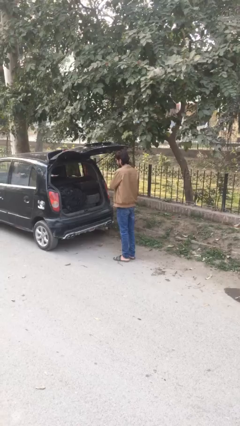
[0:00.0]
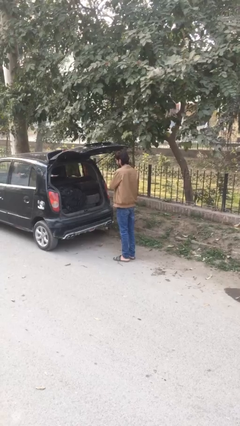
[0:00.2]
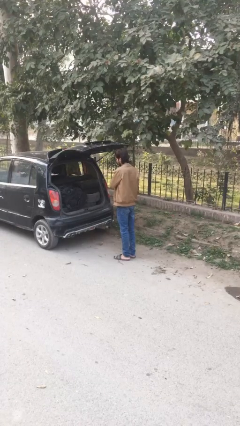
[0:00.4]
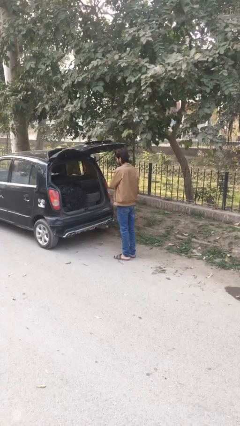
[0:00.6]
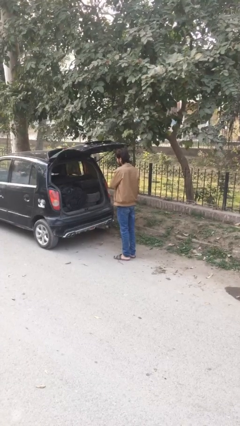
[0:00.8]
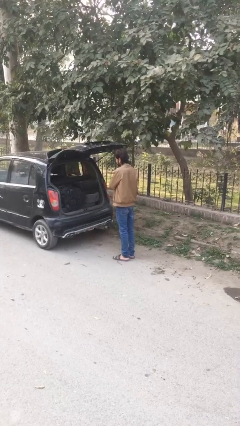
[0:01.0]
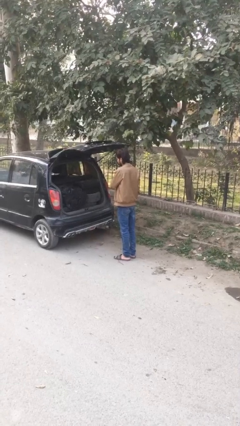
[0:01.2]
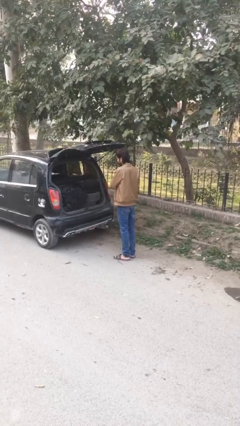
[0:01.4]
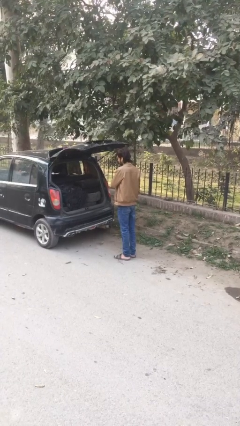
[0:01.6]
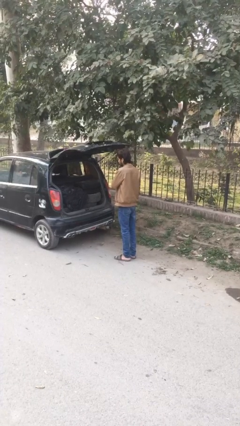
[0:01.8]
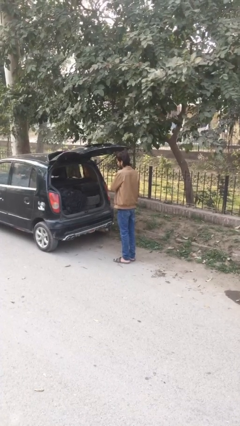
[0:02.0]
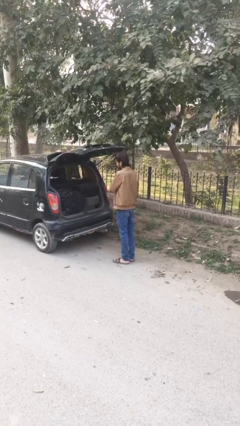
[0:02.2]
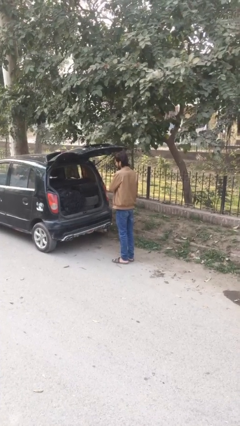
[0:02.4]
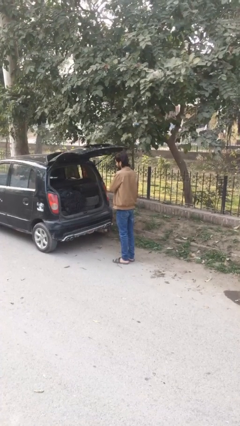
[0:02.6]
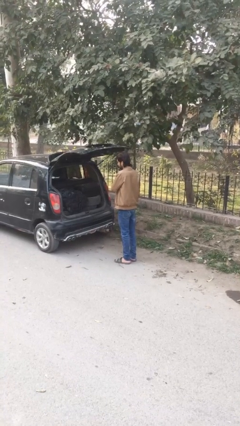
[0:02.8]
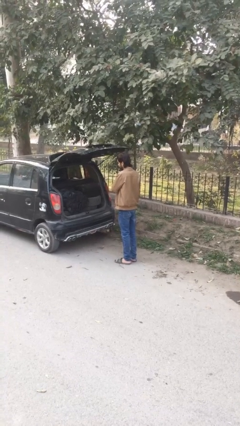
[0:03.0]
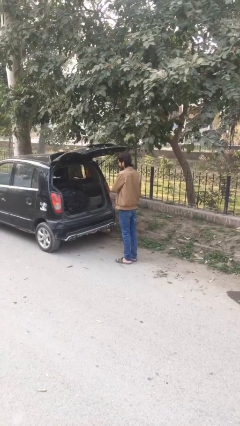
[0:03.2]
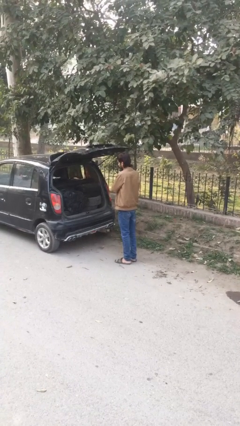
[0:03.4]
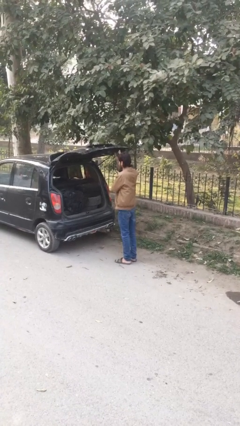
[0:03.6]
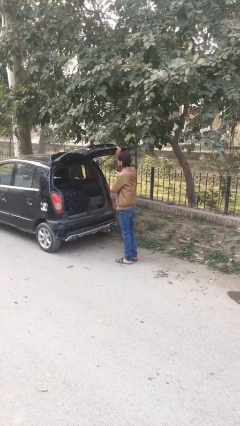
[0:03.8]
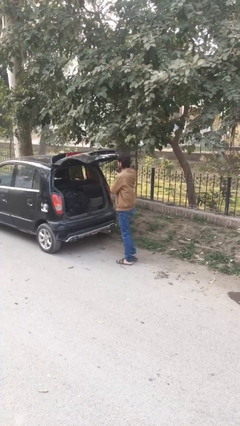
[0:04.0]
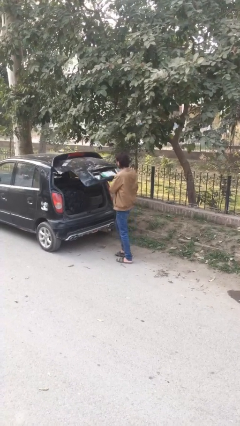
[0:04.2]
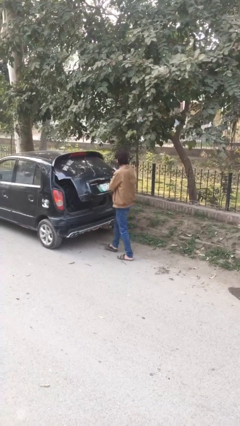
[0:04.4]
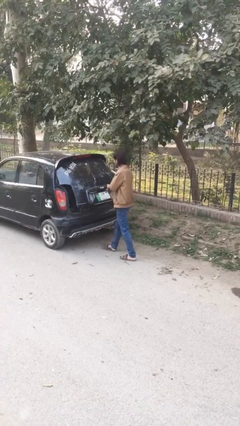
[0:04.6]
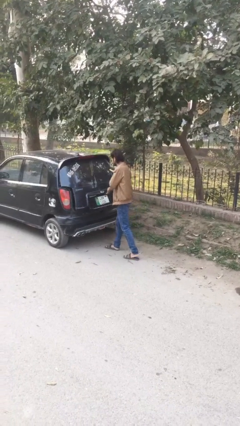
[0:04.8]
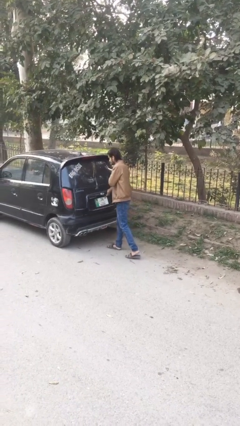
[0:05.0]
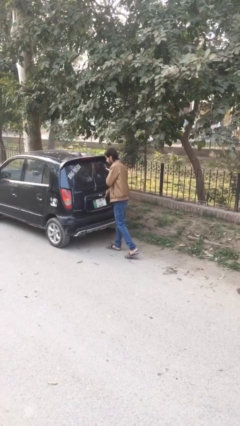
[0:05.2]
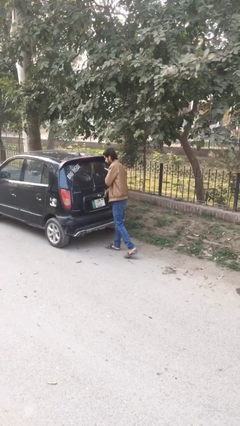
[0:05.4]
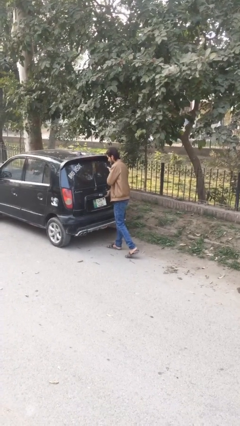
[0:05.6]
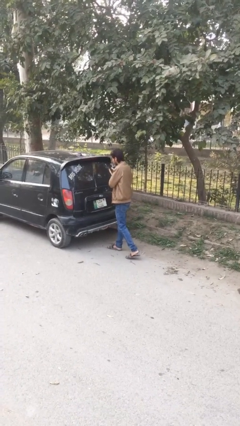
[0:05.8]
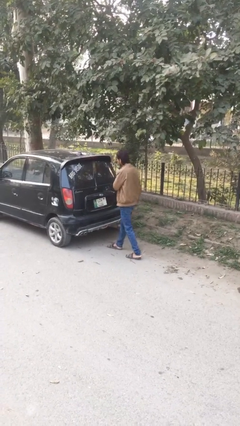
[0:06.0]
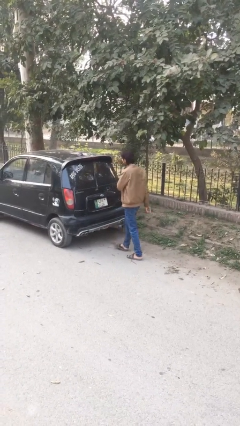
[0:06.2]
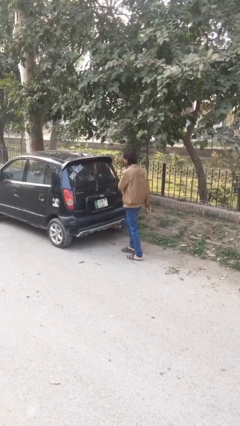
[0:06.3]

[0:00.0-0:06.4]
person closes car trunk

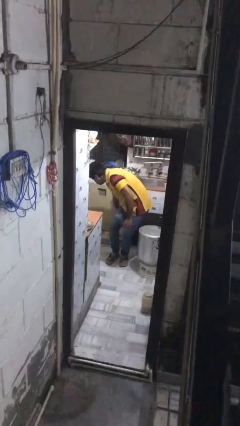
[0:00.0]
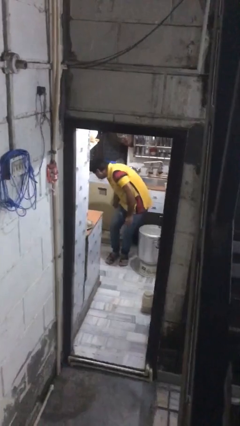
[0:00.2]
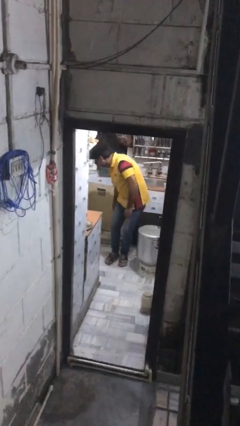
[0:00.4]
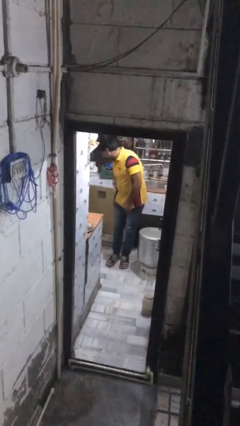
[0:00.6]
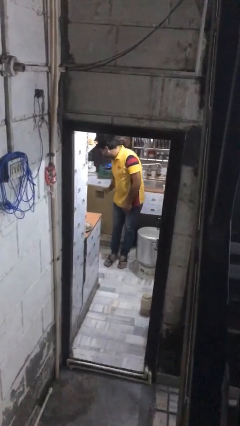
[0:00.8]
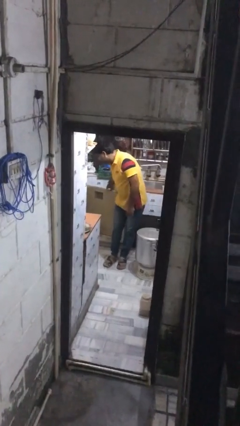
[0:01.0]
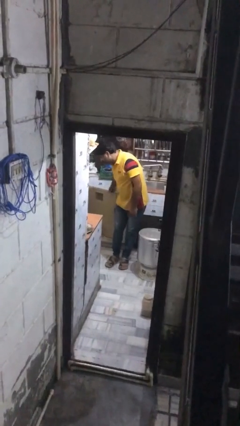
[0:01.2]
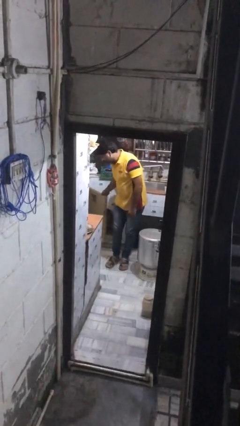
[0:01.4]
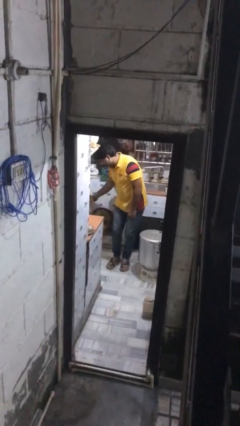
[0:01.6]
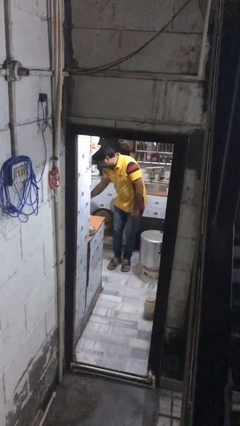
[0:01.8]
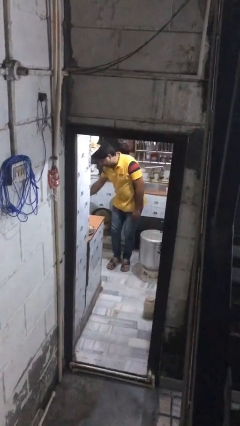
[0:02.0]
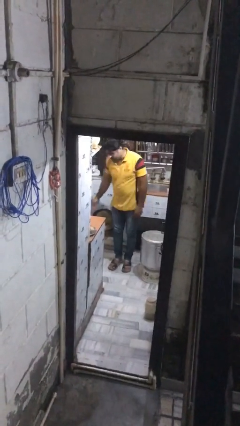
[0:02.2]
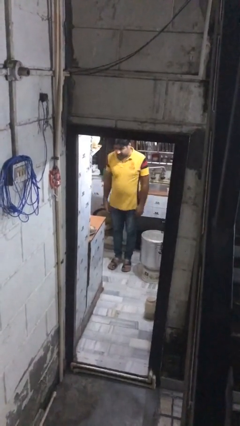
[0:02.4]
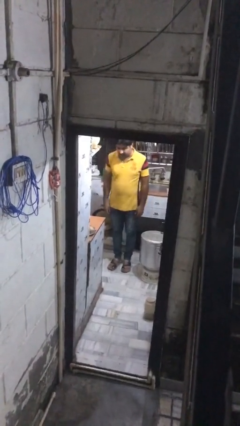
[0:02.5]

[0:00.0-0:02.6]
person closes kitchen drawer

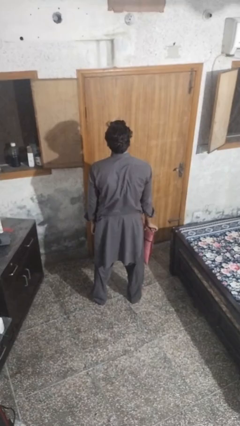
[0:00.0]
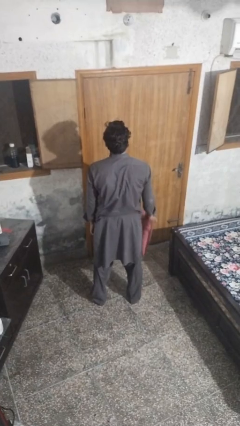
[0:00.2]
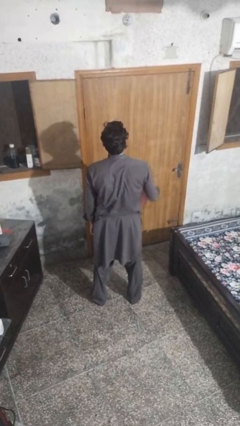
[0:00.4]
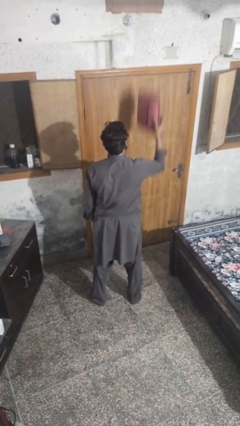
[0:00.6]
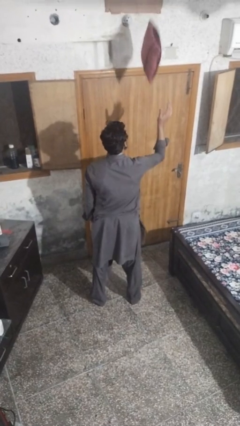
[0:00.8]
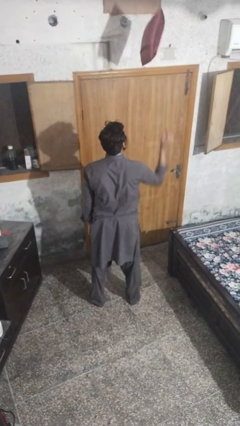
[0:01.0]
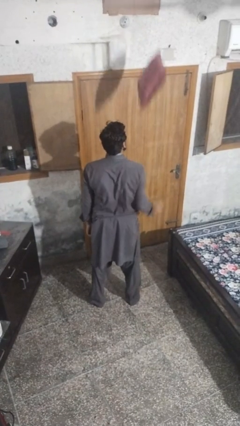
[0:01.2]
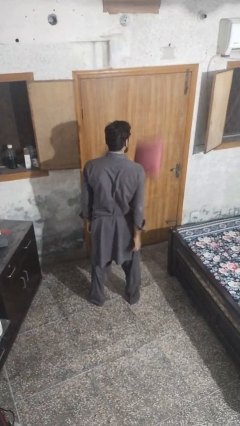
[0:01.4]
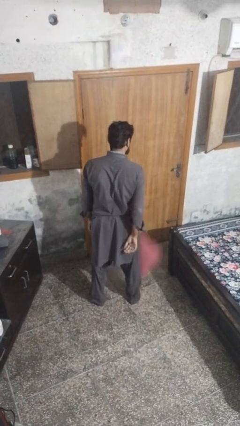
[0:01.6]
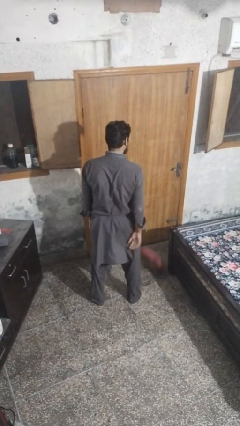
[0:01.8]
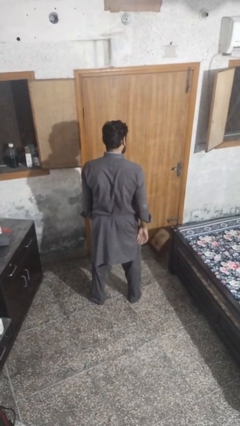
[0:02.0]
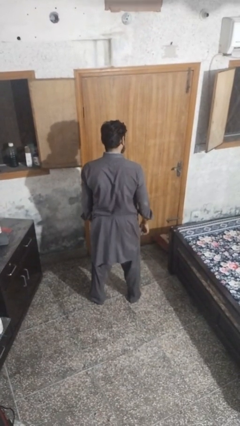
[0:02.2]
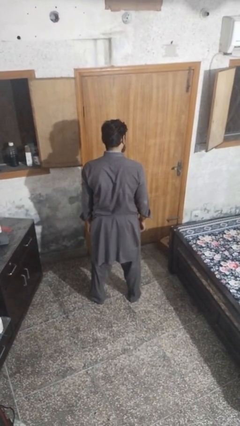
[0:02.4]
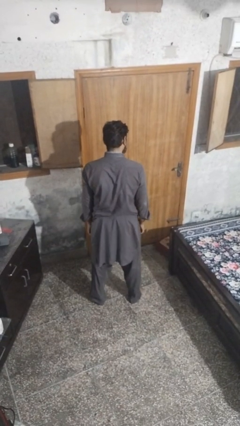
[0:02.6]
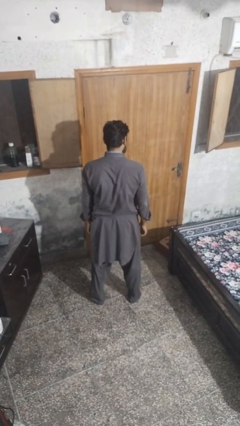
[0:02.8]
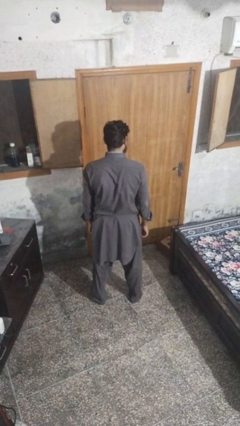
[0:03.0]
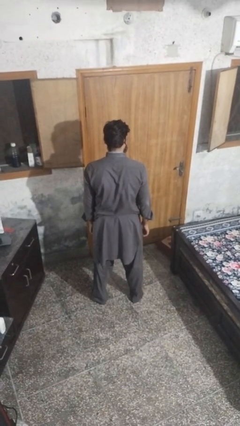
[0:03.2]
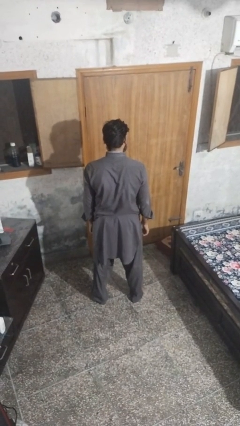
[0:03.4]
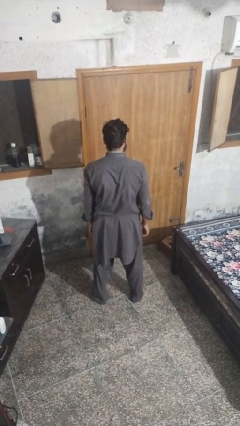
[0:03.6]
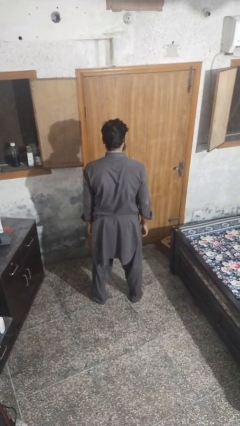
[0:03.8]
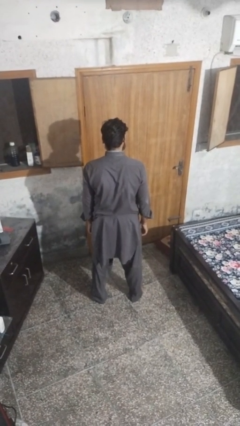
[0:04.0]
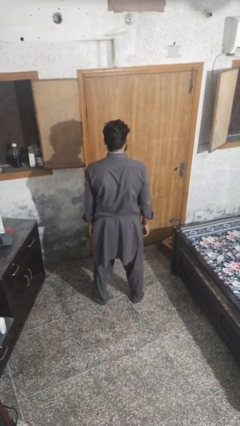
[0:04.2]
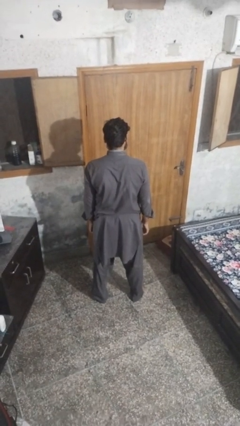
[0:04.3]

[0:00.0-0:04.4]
person throws object into air

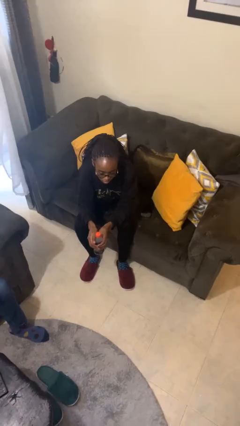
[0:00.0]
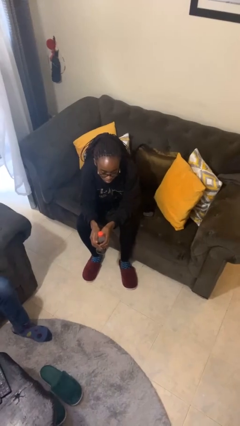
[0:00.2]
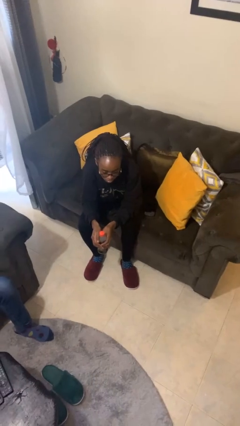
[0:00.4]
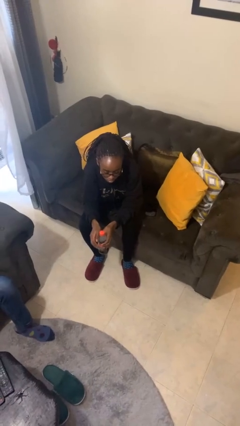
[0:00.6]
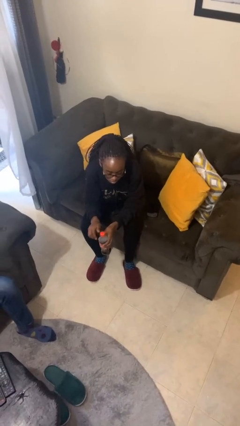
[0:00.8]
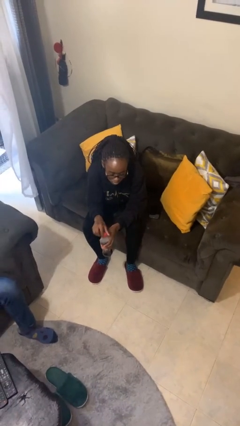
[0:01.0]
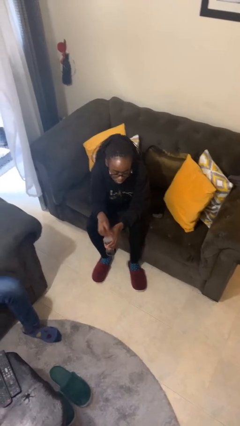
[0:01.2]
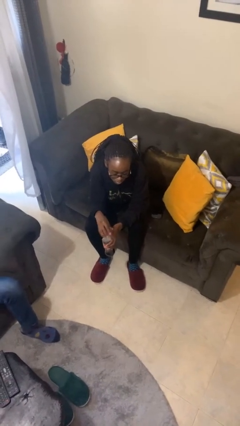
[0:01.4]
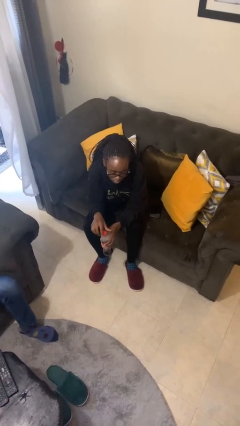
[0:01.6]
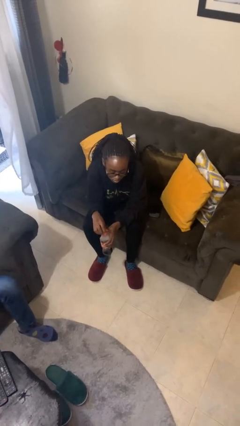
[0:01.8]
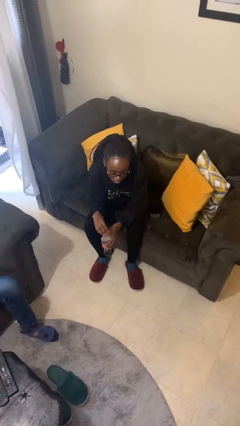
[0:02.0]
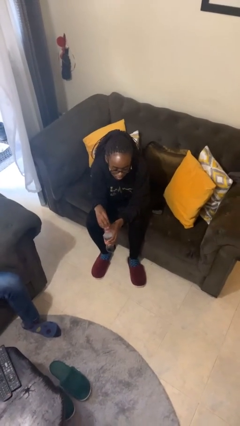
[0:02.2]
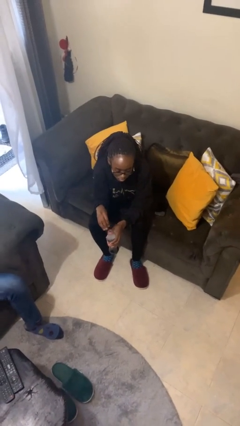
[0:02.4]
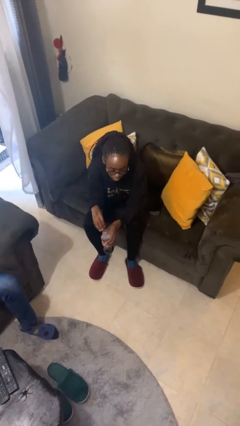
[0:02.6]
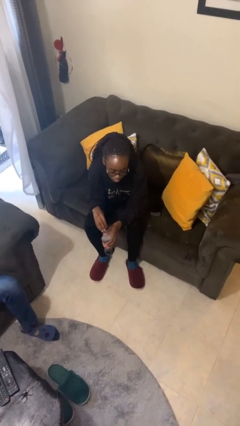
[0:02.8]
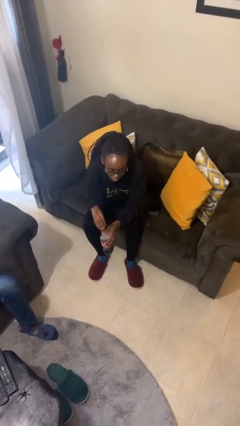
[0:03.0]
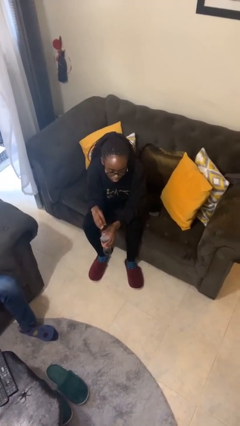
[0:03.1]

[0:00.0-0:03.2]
person unscrews lid from bottle

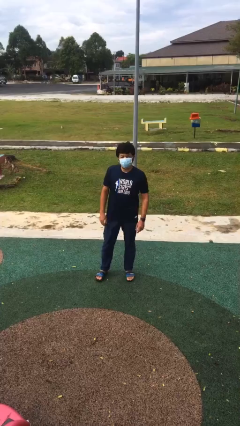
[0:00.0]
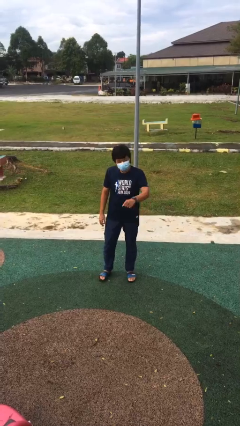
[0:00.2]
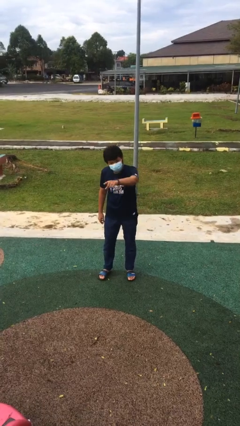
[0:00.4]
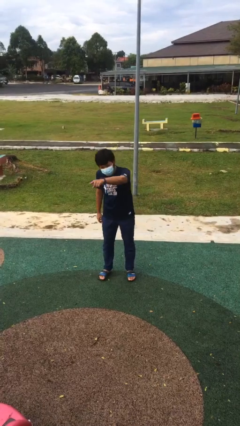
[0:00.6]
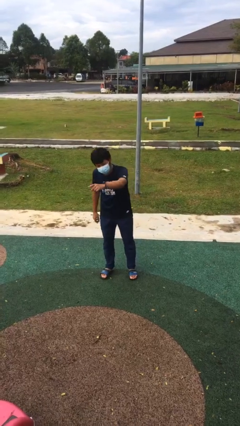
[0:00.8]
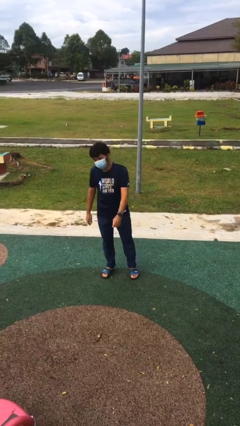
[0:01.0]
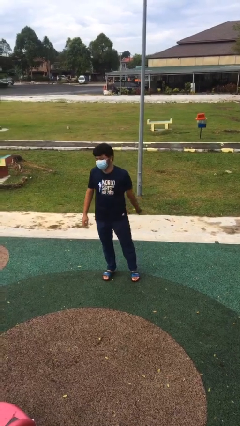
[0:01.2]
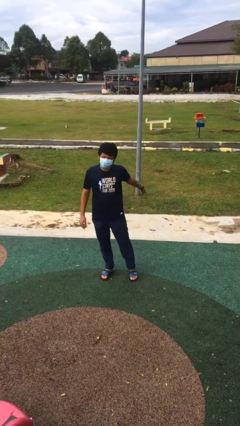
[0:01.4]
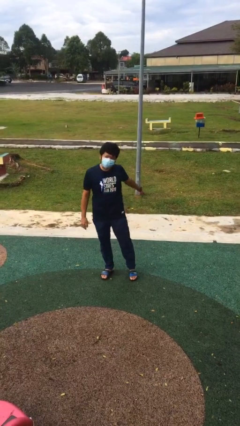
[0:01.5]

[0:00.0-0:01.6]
person points at person
